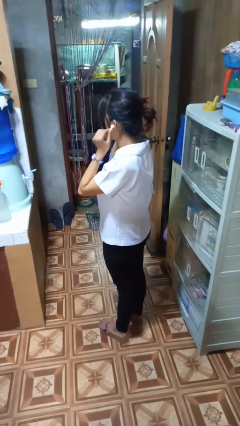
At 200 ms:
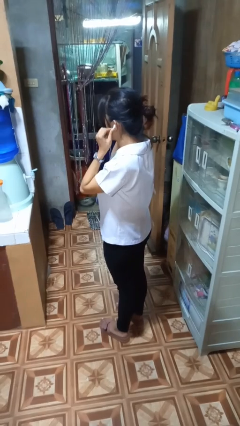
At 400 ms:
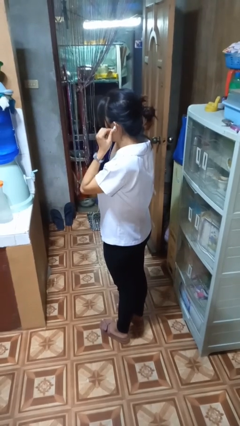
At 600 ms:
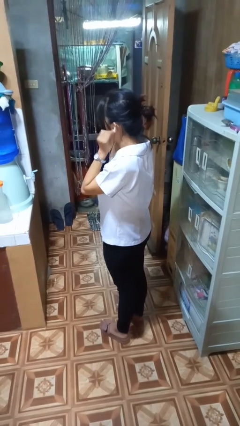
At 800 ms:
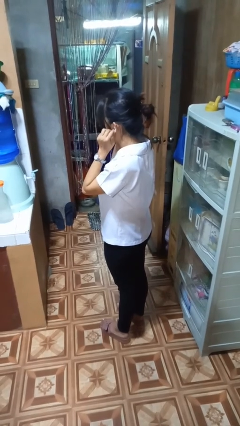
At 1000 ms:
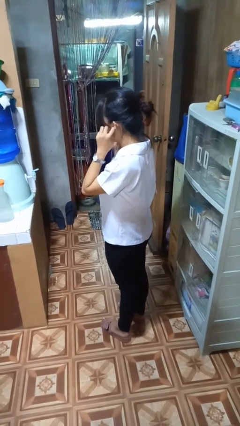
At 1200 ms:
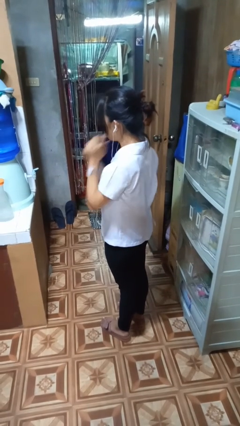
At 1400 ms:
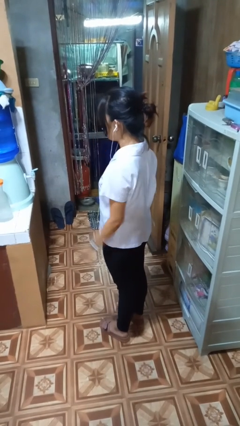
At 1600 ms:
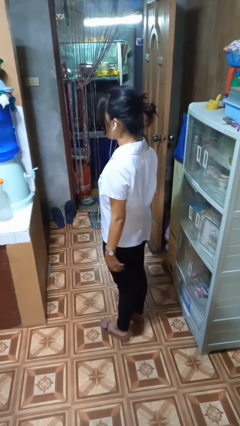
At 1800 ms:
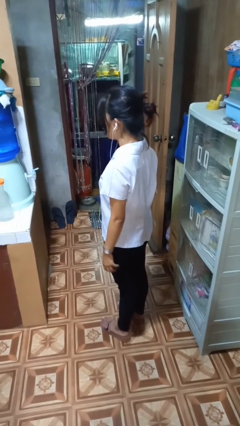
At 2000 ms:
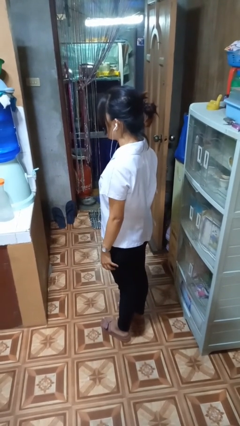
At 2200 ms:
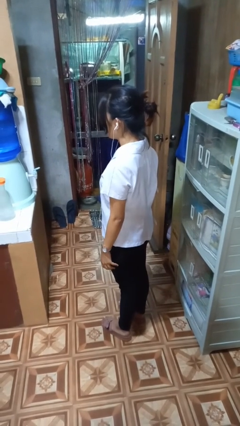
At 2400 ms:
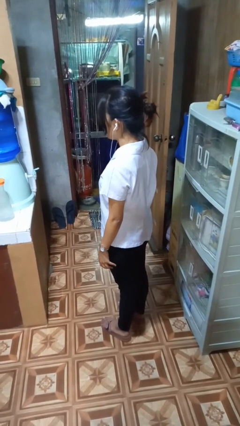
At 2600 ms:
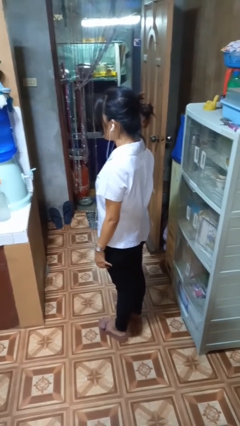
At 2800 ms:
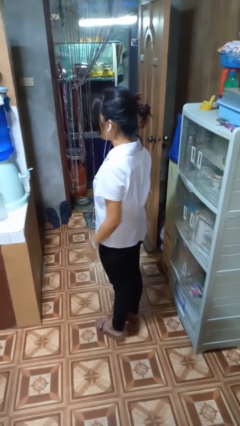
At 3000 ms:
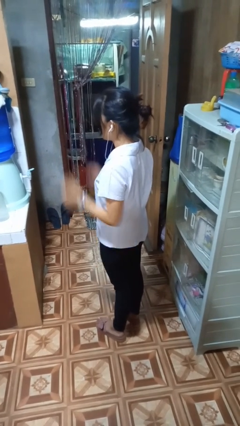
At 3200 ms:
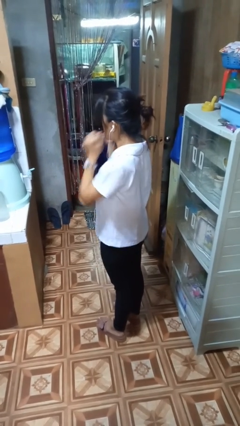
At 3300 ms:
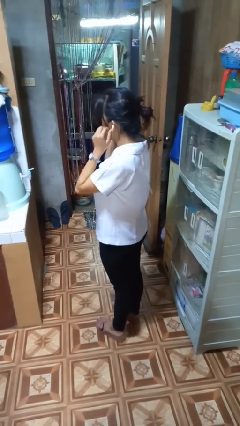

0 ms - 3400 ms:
person puts on headphones

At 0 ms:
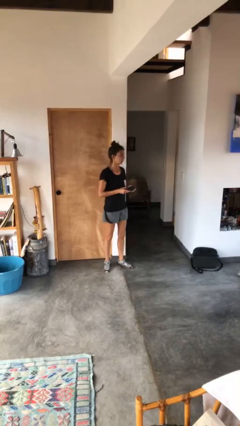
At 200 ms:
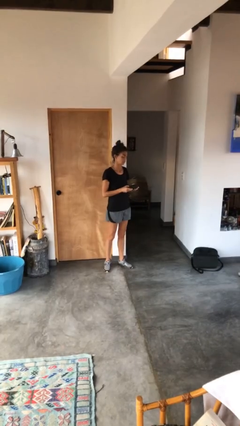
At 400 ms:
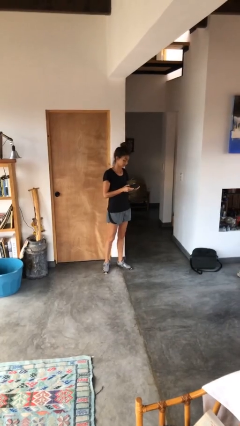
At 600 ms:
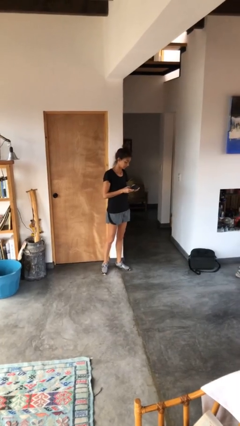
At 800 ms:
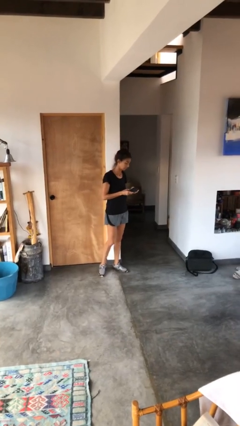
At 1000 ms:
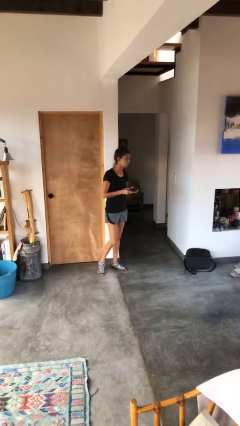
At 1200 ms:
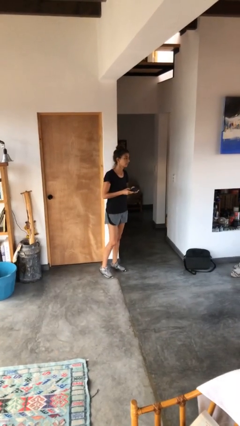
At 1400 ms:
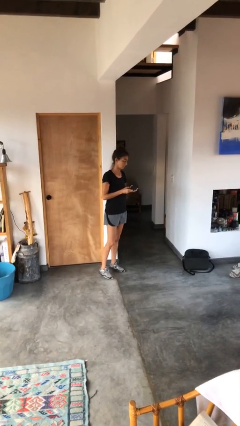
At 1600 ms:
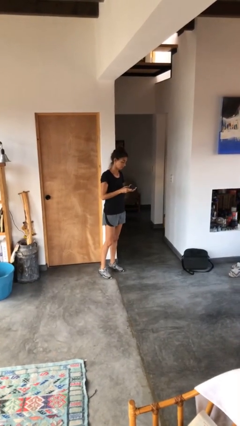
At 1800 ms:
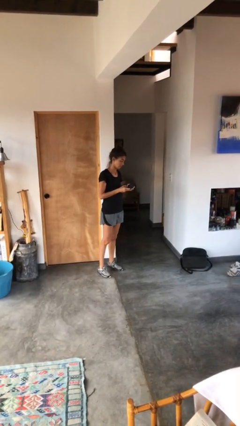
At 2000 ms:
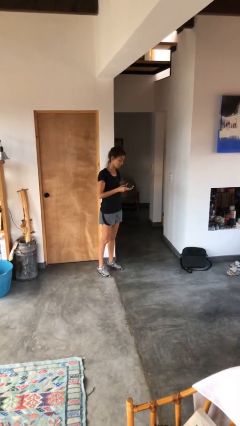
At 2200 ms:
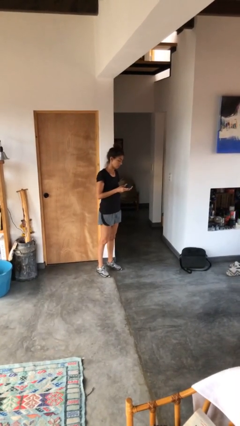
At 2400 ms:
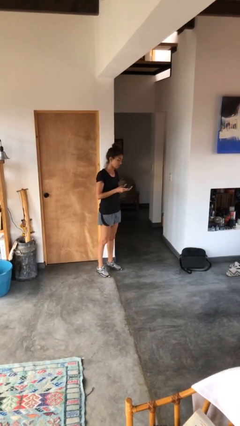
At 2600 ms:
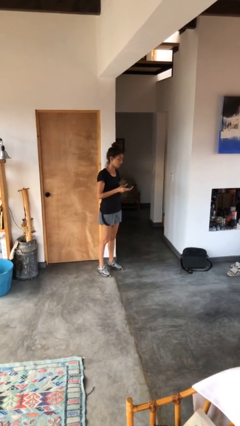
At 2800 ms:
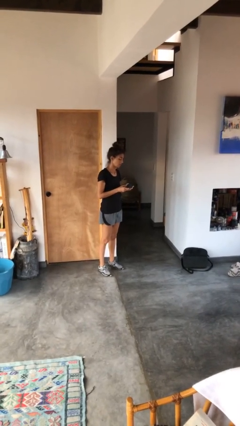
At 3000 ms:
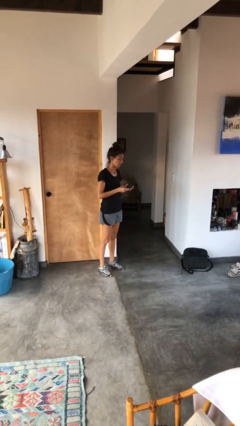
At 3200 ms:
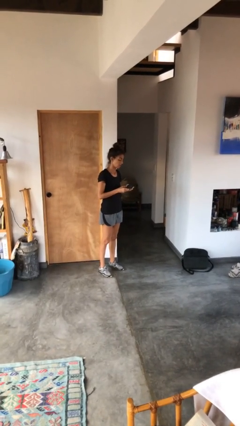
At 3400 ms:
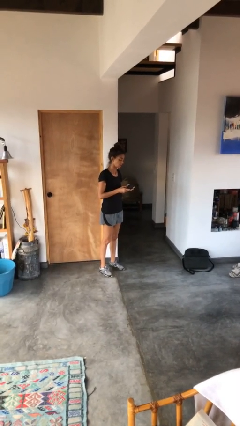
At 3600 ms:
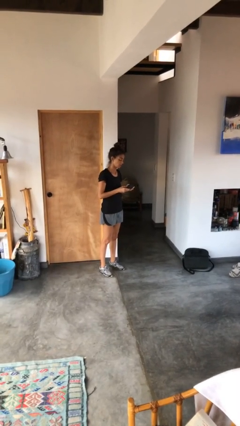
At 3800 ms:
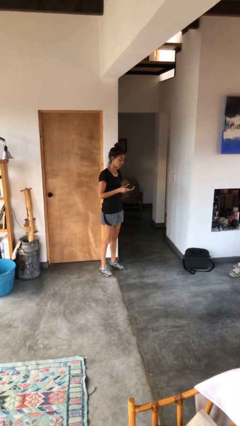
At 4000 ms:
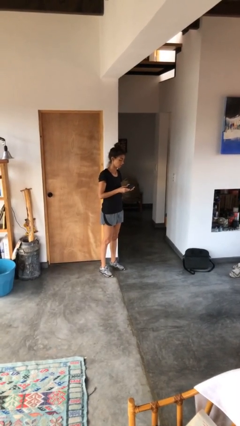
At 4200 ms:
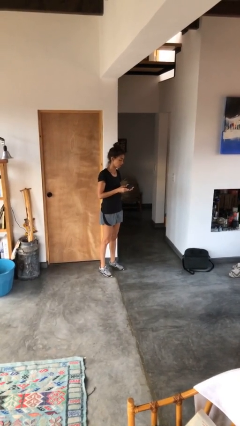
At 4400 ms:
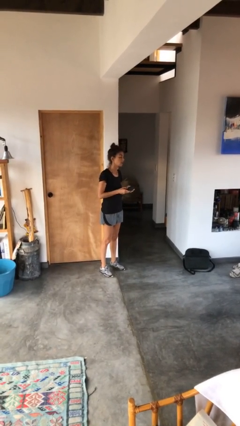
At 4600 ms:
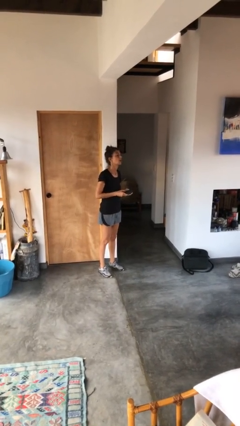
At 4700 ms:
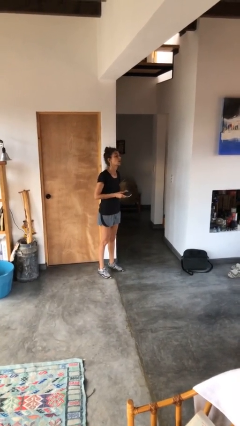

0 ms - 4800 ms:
person interacts with handheld game

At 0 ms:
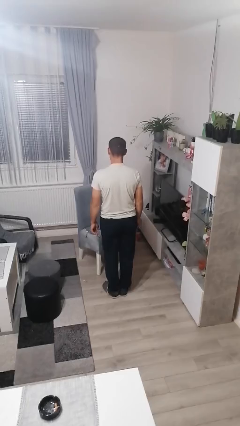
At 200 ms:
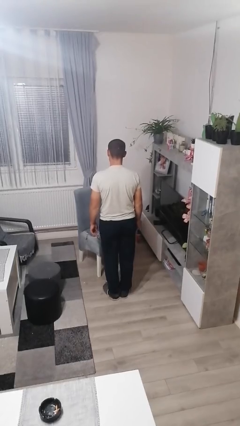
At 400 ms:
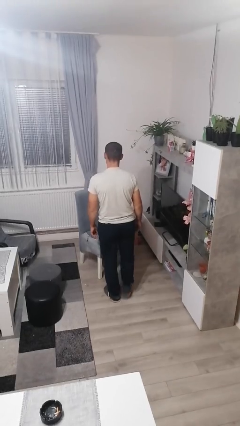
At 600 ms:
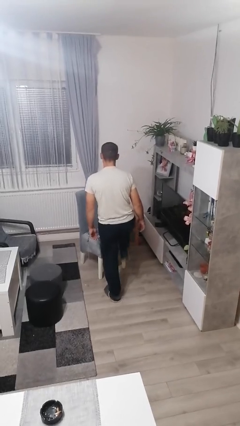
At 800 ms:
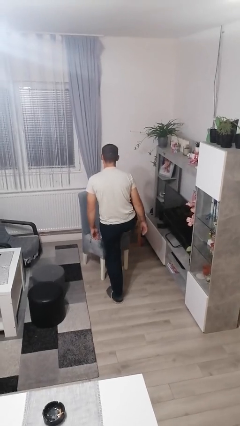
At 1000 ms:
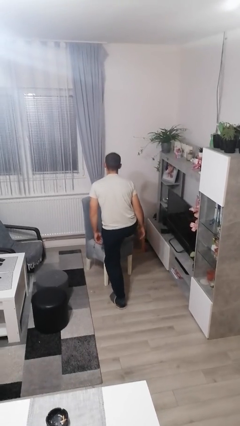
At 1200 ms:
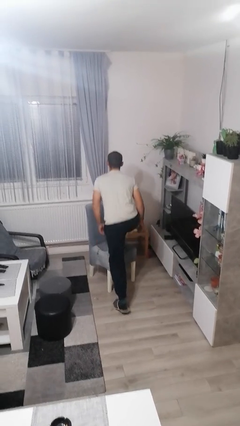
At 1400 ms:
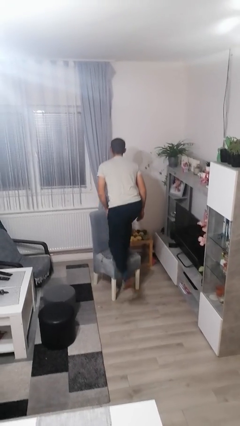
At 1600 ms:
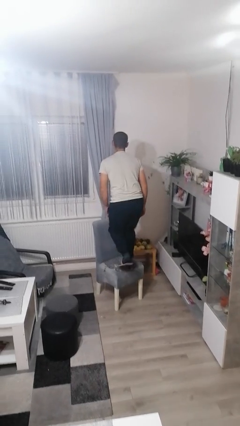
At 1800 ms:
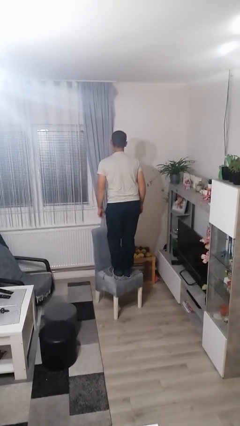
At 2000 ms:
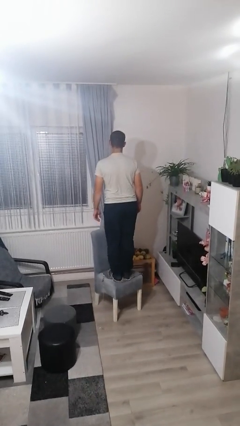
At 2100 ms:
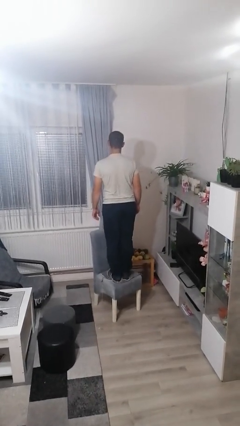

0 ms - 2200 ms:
person climbs on chair

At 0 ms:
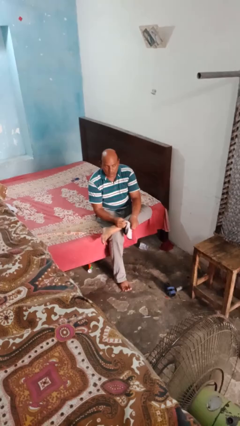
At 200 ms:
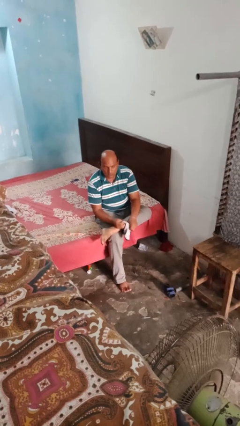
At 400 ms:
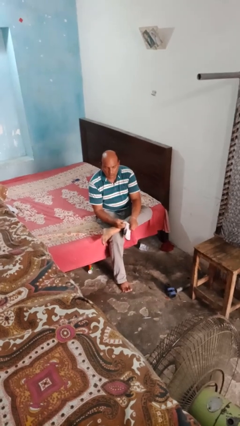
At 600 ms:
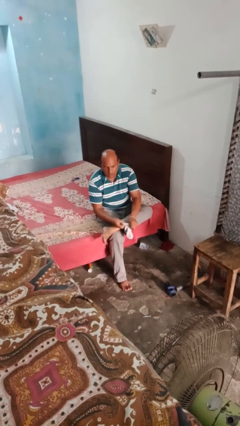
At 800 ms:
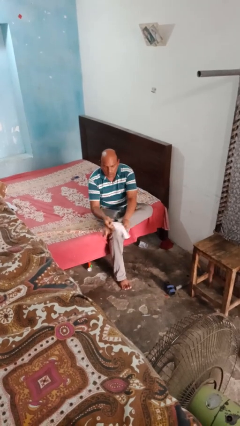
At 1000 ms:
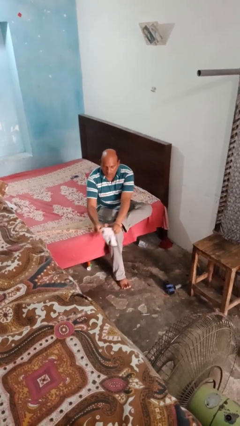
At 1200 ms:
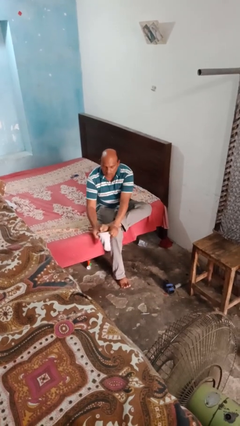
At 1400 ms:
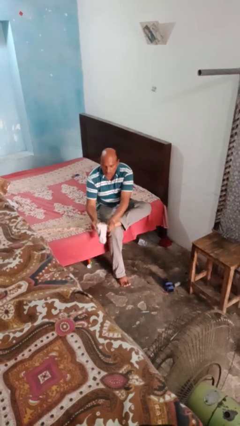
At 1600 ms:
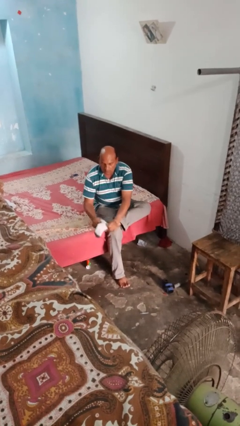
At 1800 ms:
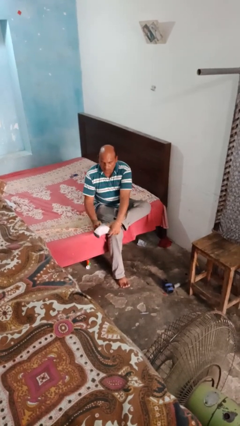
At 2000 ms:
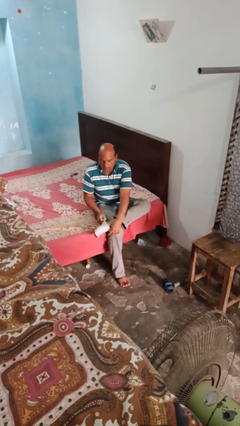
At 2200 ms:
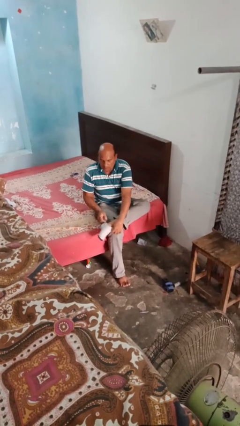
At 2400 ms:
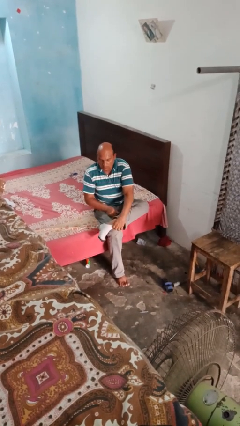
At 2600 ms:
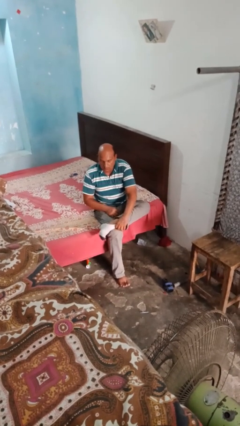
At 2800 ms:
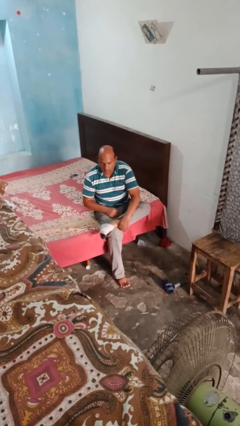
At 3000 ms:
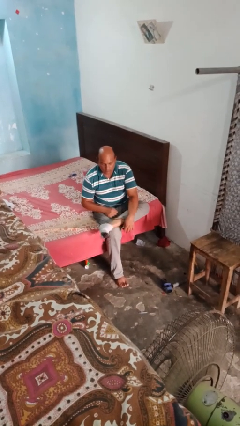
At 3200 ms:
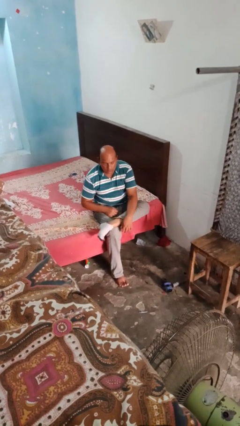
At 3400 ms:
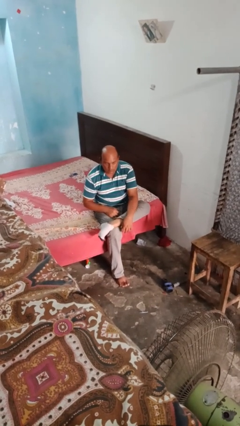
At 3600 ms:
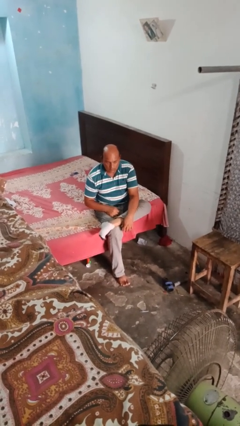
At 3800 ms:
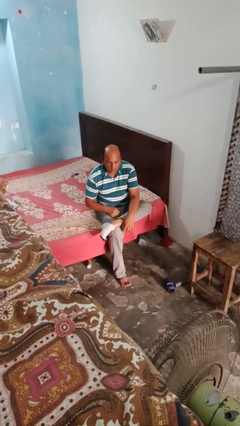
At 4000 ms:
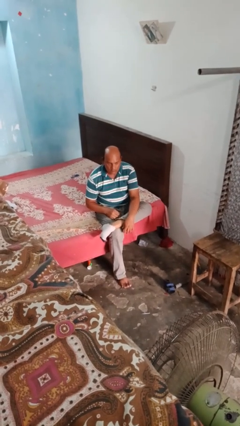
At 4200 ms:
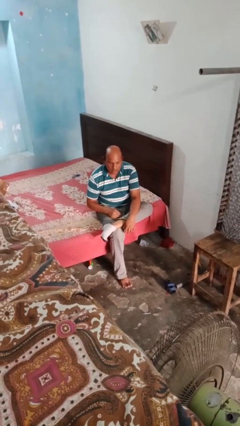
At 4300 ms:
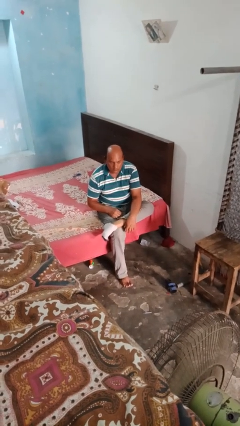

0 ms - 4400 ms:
person puts on socks

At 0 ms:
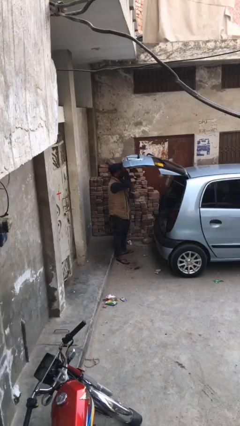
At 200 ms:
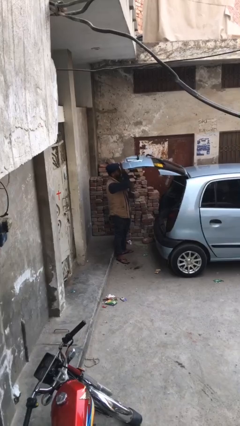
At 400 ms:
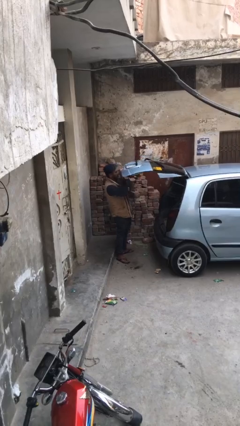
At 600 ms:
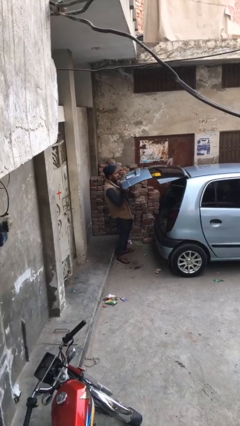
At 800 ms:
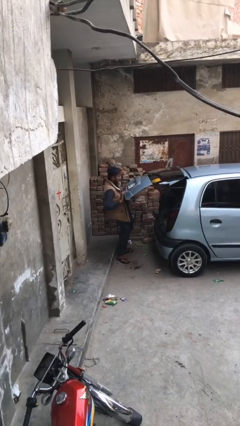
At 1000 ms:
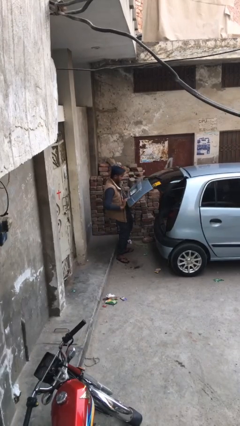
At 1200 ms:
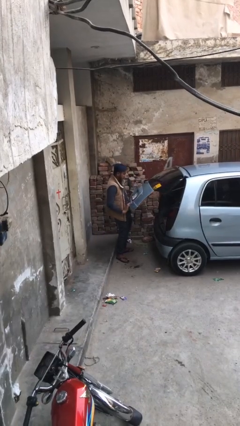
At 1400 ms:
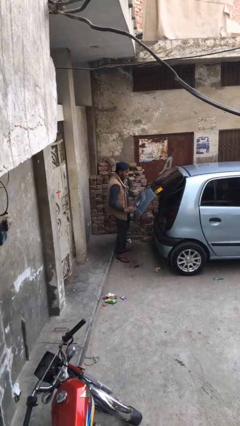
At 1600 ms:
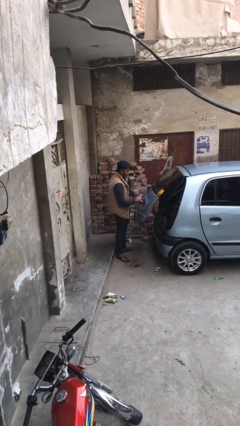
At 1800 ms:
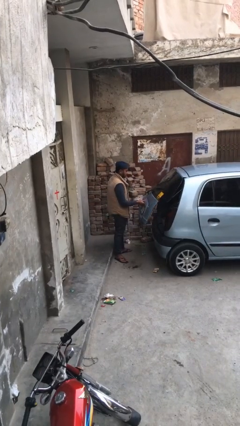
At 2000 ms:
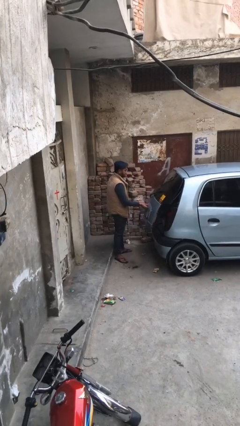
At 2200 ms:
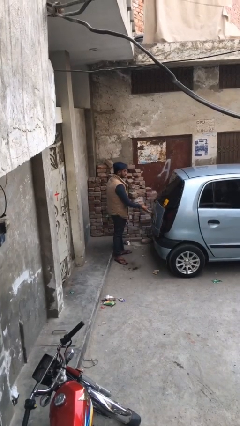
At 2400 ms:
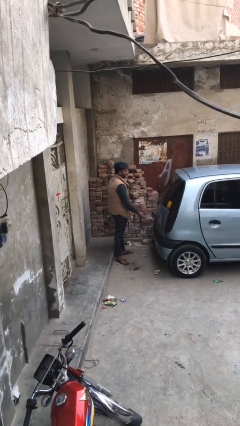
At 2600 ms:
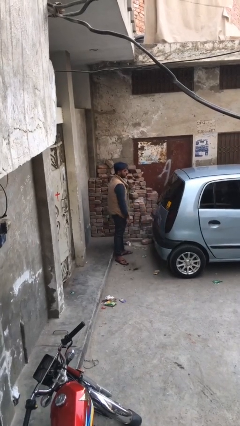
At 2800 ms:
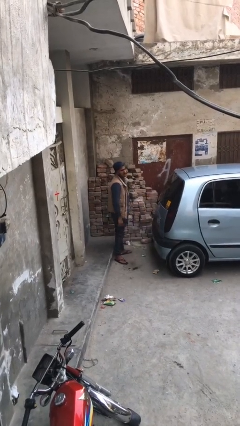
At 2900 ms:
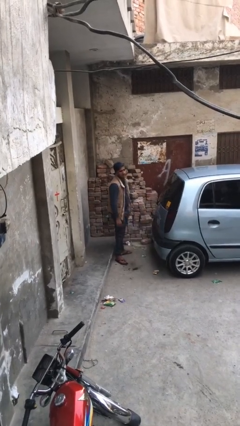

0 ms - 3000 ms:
person closes car trunk
